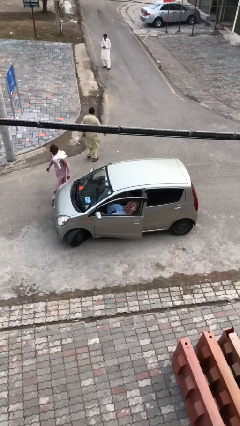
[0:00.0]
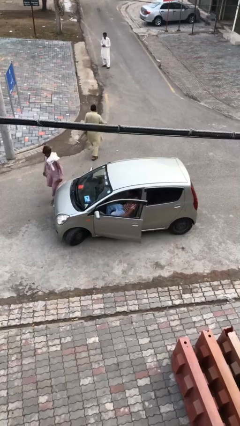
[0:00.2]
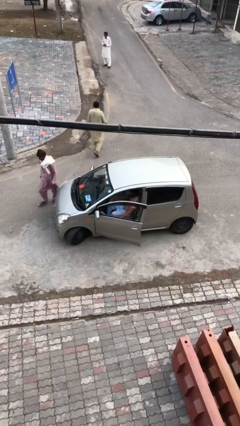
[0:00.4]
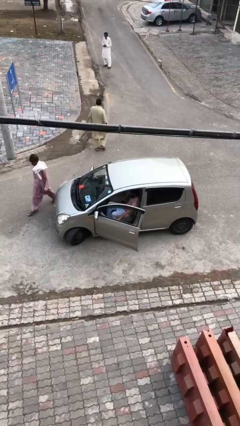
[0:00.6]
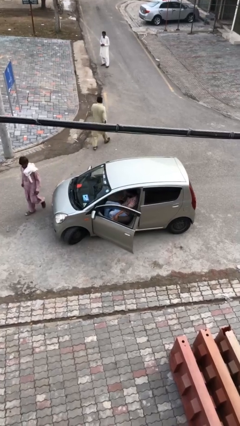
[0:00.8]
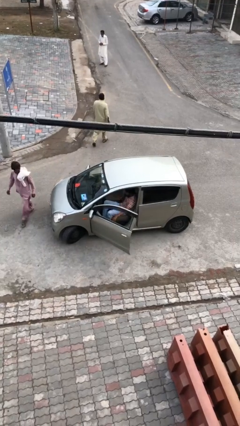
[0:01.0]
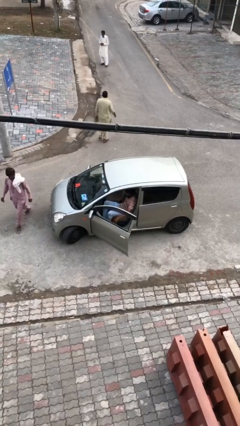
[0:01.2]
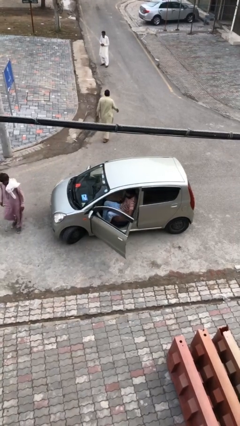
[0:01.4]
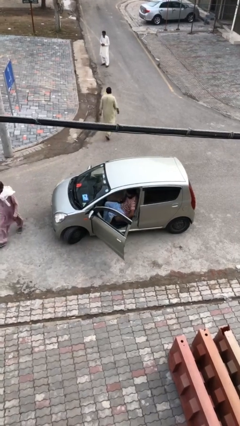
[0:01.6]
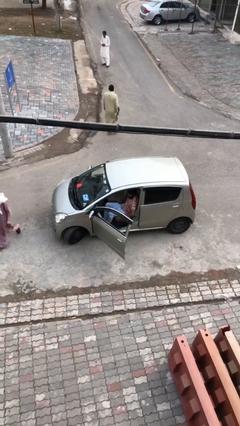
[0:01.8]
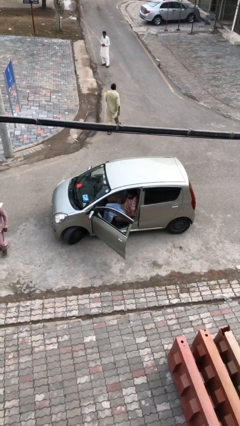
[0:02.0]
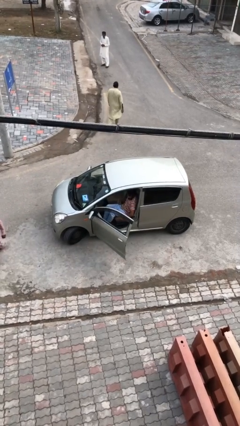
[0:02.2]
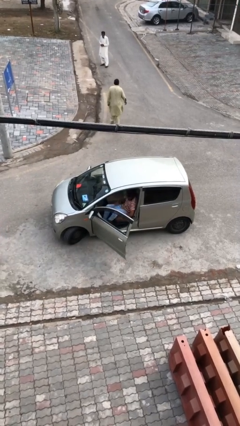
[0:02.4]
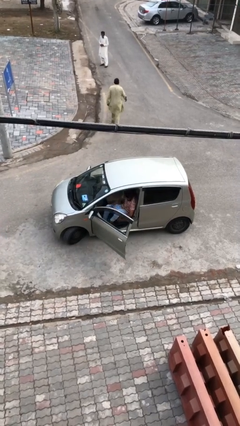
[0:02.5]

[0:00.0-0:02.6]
person opens car door

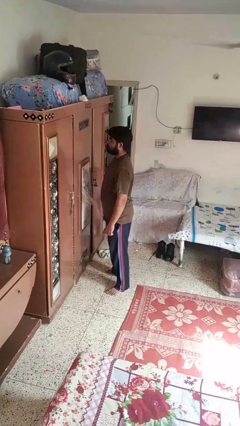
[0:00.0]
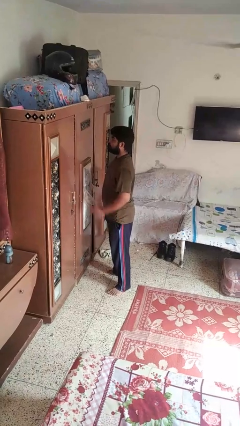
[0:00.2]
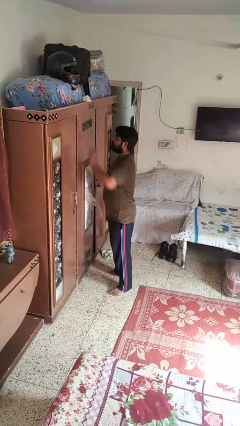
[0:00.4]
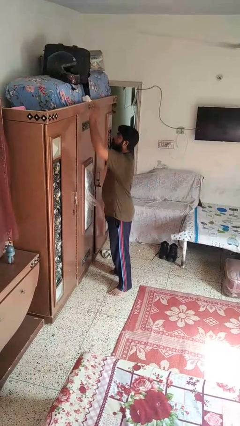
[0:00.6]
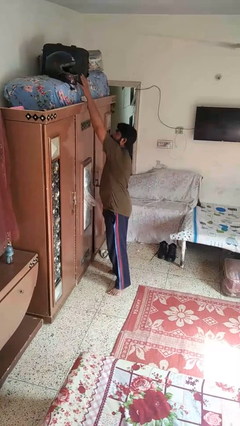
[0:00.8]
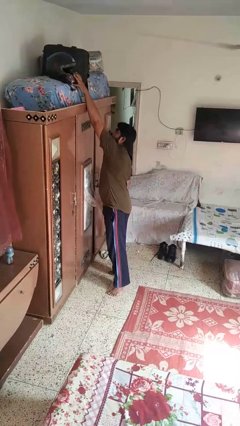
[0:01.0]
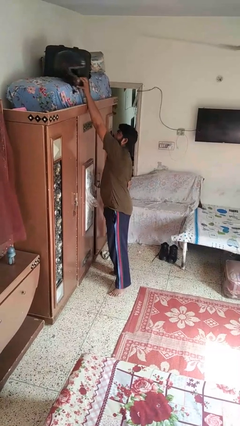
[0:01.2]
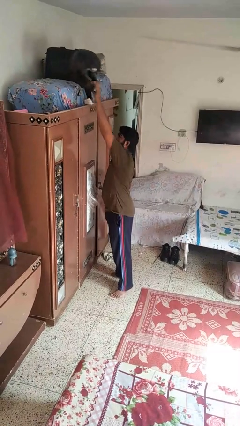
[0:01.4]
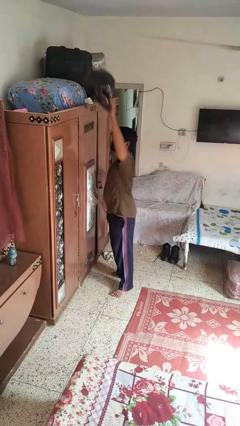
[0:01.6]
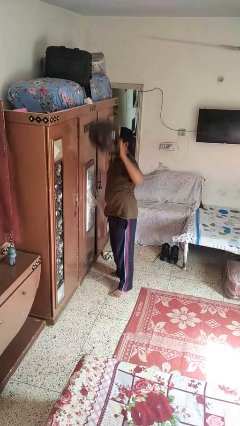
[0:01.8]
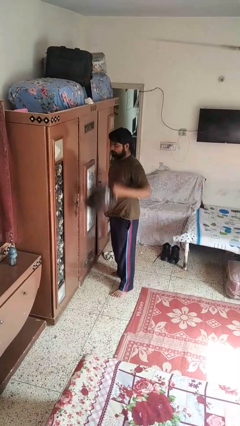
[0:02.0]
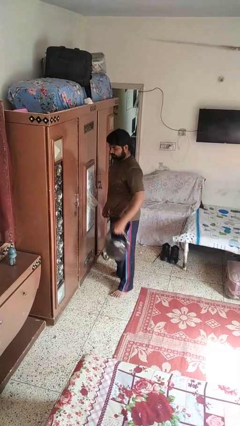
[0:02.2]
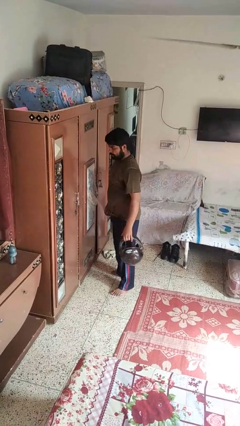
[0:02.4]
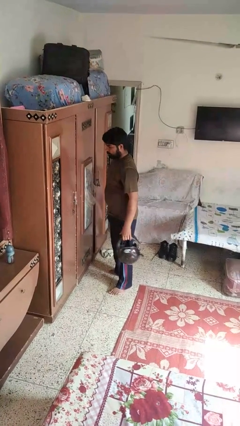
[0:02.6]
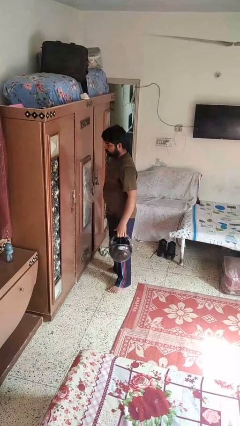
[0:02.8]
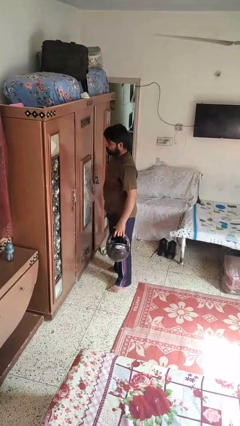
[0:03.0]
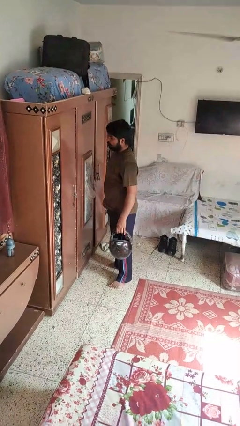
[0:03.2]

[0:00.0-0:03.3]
person picks up object from shelf

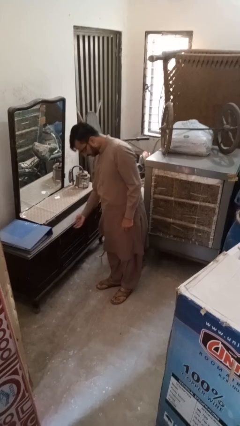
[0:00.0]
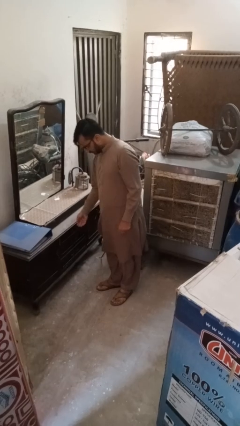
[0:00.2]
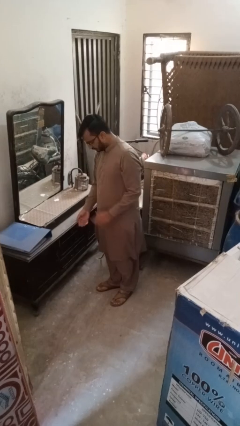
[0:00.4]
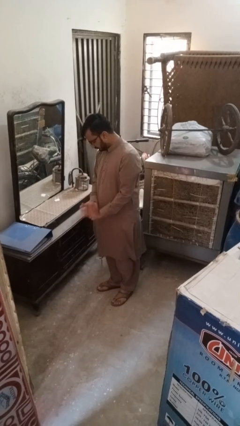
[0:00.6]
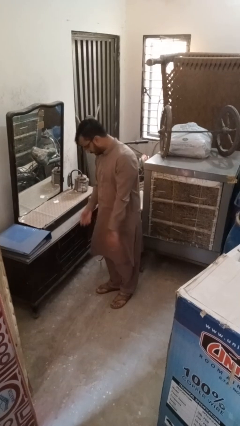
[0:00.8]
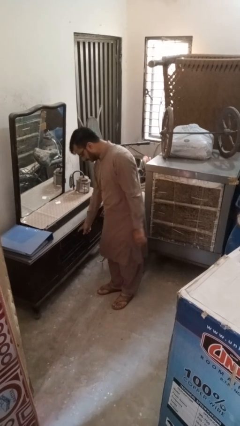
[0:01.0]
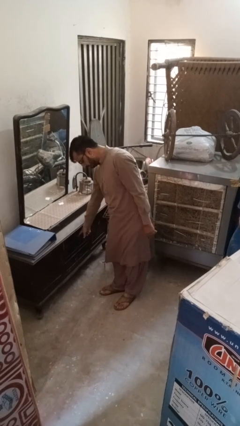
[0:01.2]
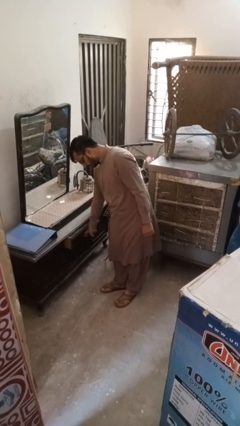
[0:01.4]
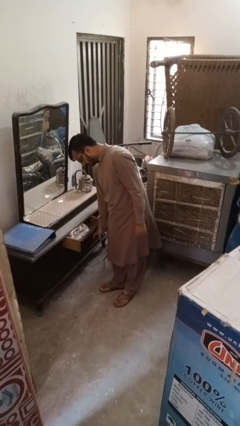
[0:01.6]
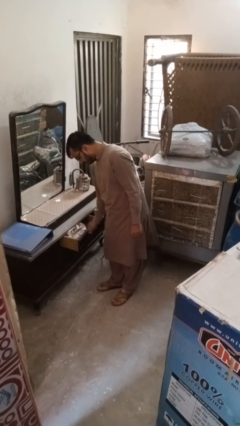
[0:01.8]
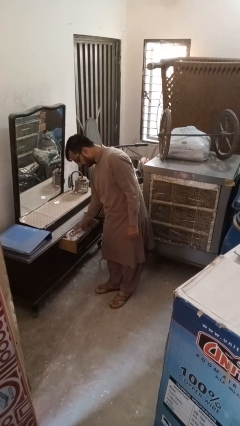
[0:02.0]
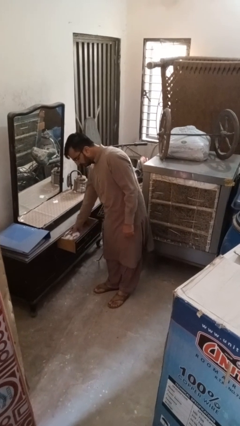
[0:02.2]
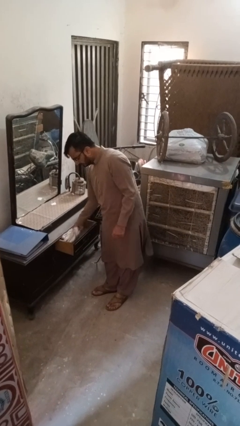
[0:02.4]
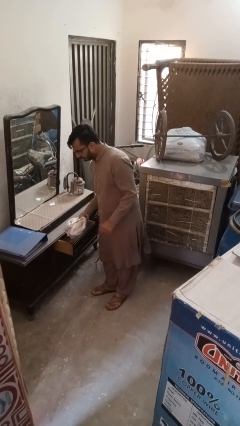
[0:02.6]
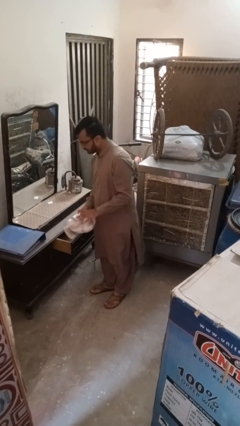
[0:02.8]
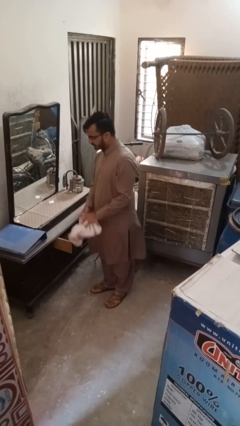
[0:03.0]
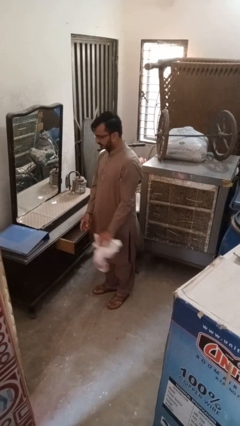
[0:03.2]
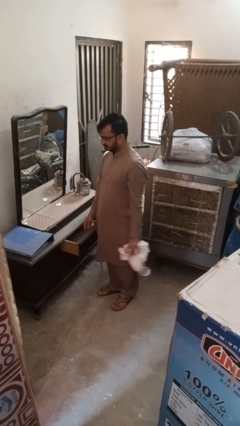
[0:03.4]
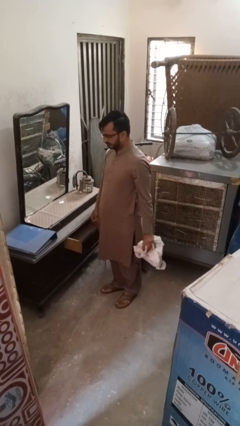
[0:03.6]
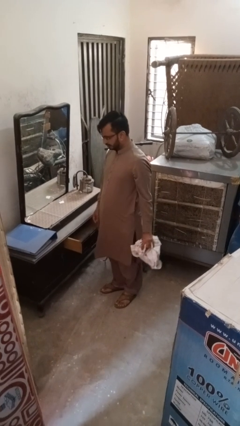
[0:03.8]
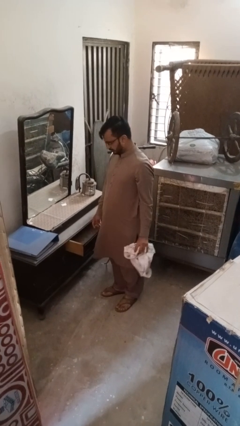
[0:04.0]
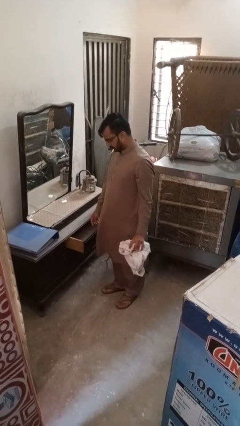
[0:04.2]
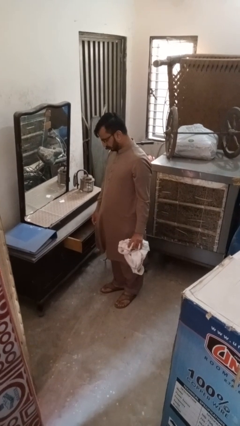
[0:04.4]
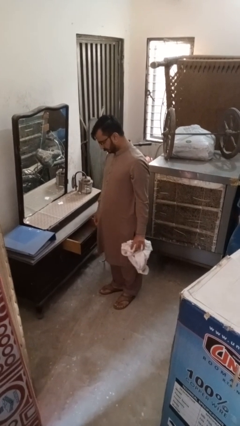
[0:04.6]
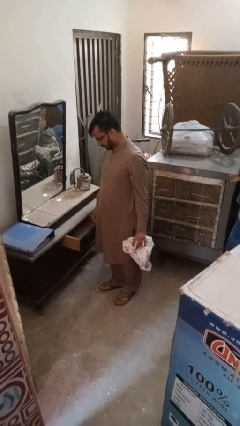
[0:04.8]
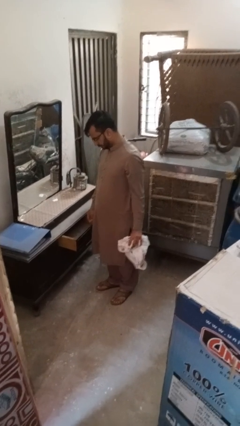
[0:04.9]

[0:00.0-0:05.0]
person takes clothes from dresser

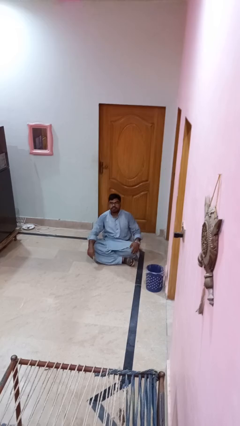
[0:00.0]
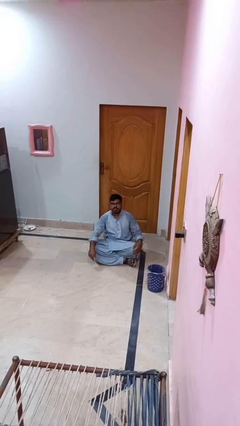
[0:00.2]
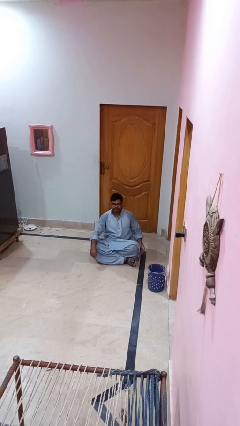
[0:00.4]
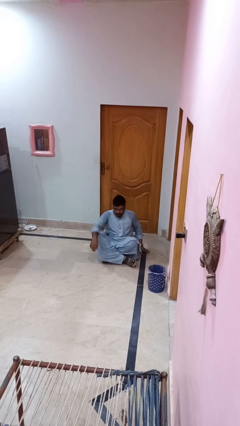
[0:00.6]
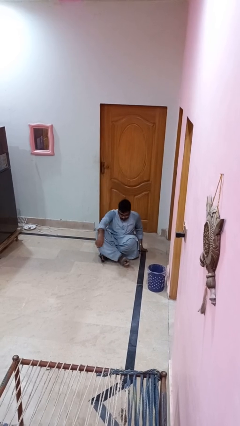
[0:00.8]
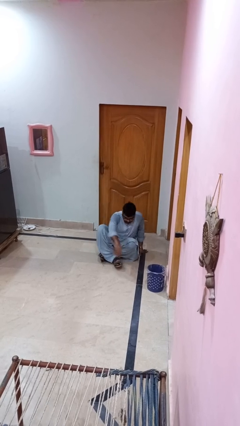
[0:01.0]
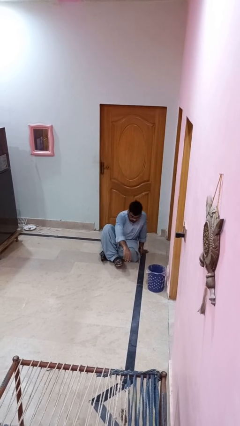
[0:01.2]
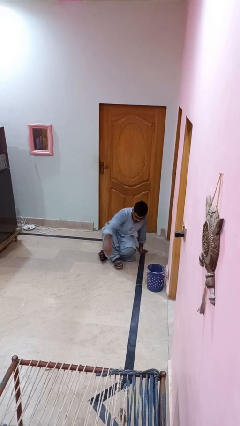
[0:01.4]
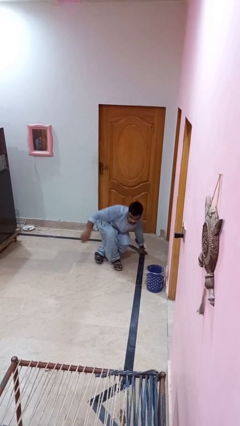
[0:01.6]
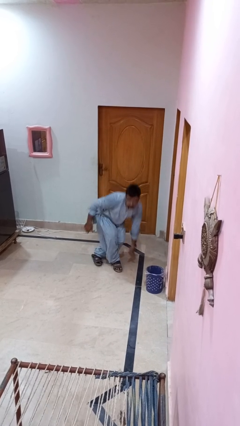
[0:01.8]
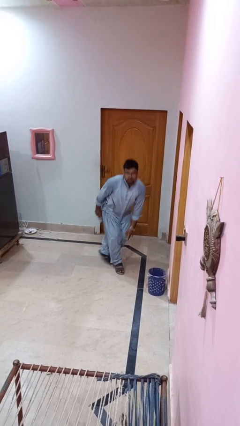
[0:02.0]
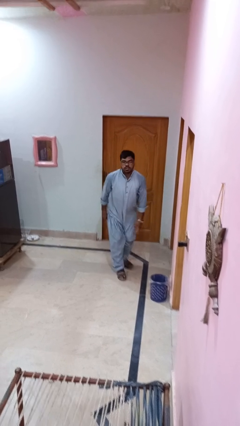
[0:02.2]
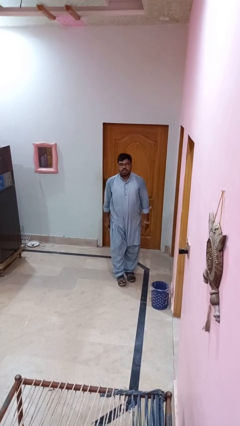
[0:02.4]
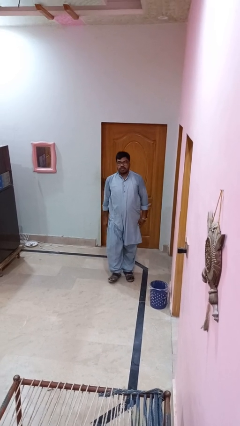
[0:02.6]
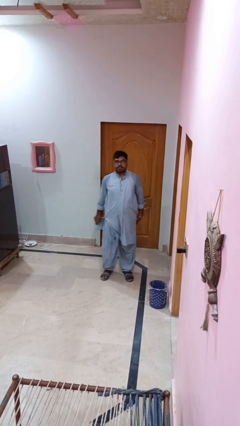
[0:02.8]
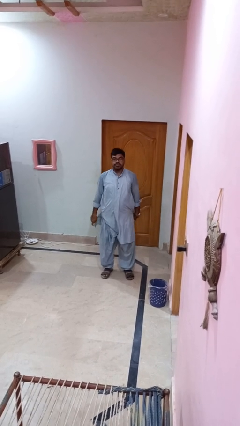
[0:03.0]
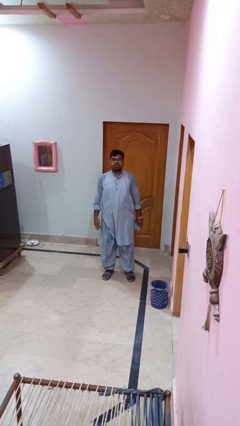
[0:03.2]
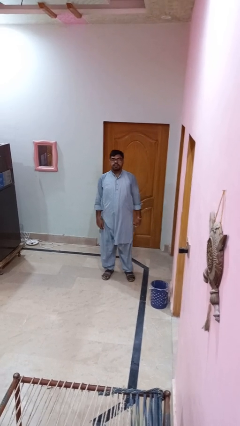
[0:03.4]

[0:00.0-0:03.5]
person stands up from floor

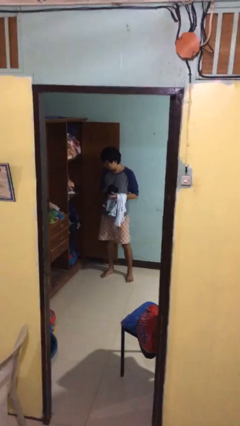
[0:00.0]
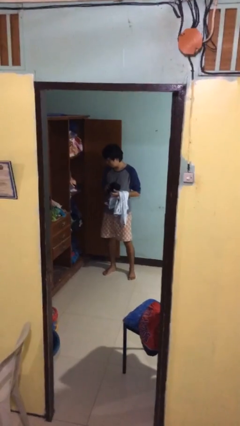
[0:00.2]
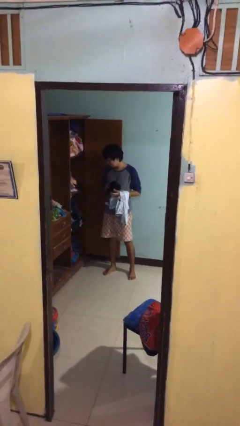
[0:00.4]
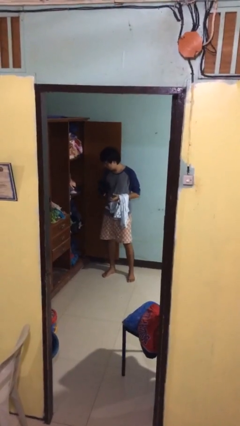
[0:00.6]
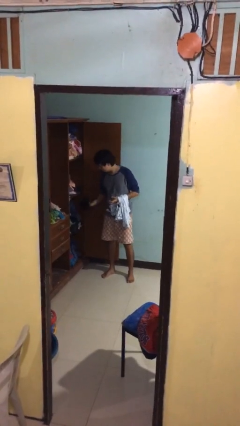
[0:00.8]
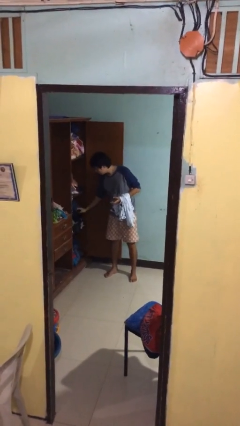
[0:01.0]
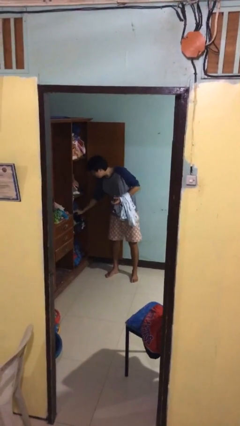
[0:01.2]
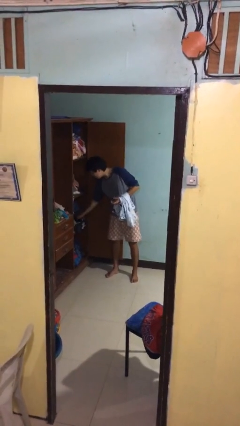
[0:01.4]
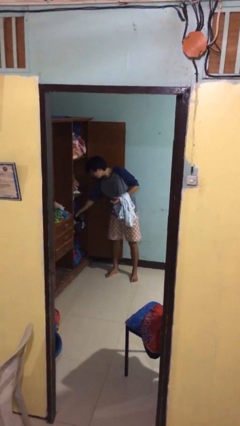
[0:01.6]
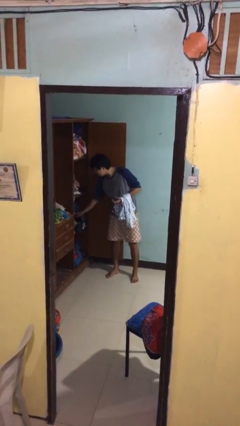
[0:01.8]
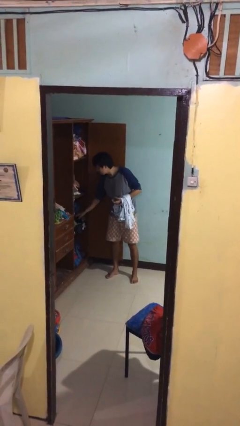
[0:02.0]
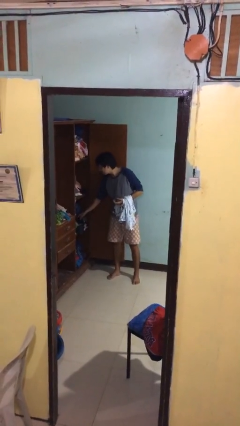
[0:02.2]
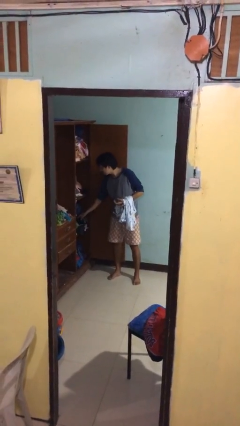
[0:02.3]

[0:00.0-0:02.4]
person puts clothes into dresser

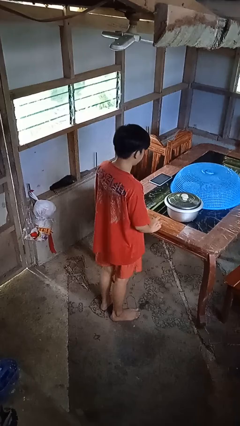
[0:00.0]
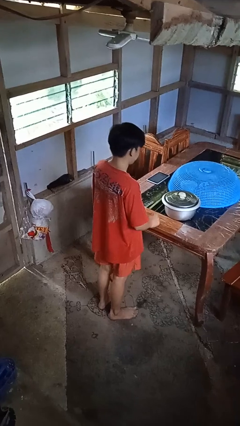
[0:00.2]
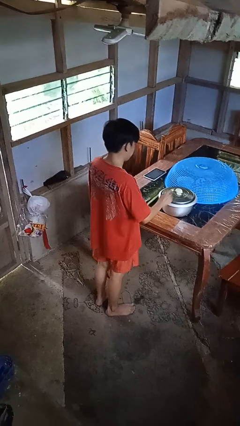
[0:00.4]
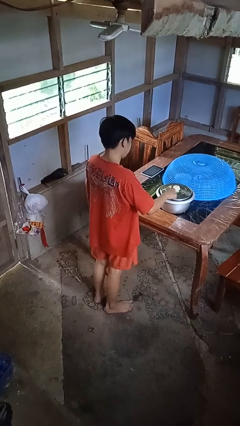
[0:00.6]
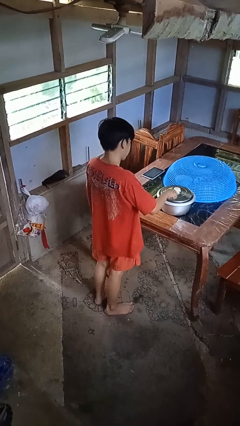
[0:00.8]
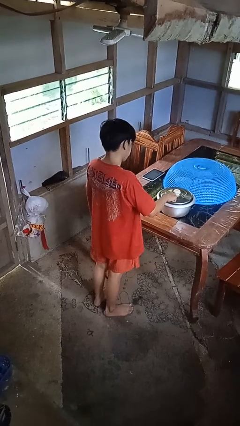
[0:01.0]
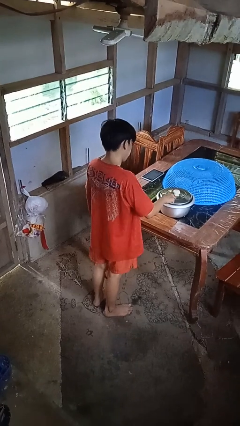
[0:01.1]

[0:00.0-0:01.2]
person taps object with finger
